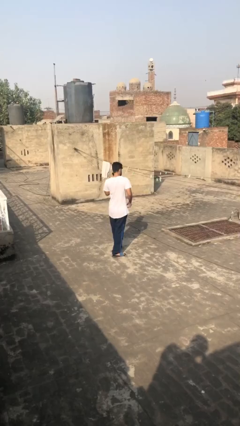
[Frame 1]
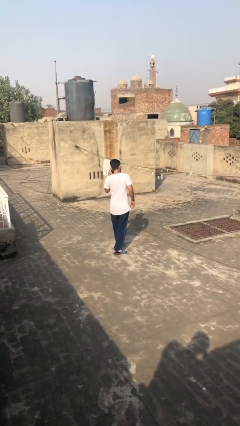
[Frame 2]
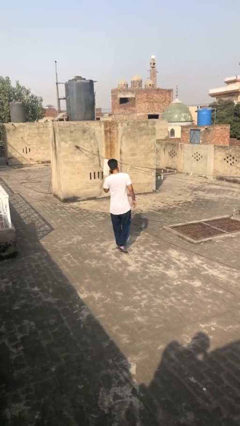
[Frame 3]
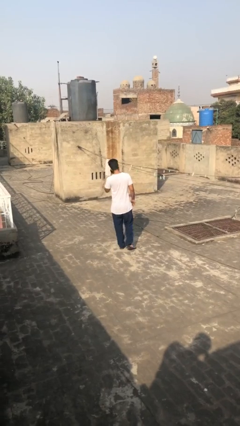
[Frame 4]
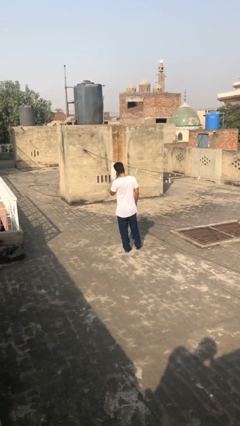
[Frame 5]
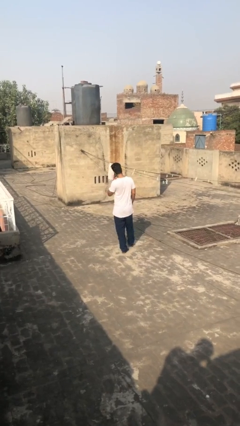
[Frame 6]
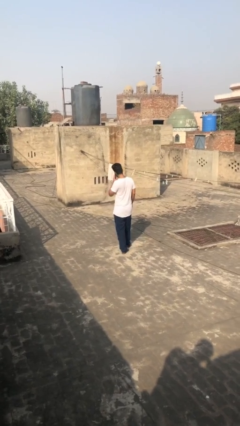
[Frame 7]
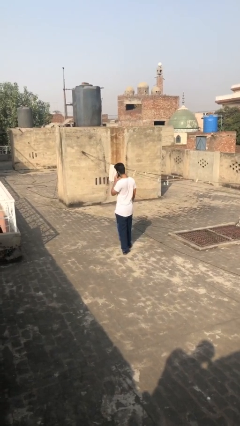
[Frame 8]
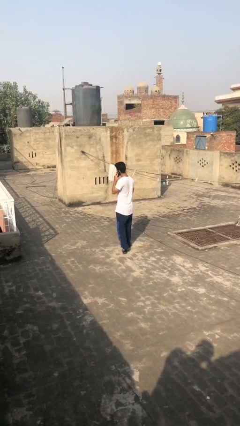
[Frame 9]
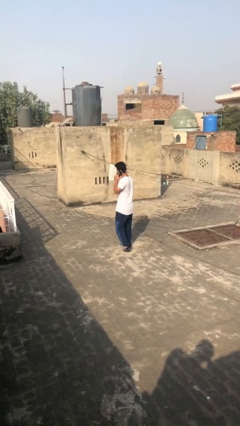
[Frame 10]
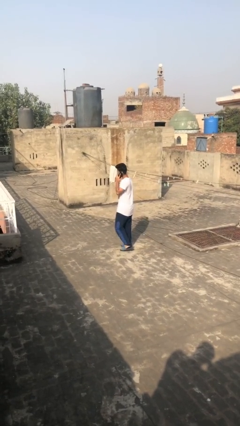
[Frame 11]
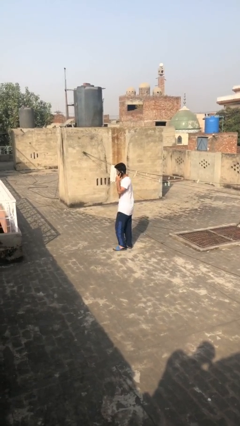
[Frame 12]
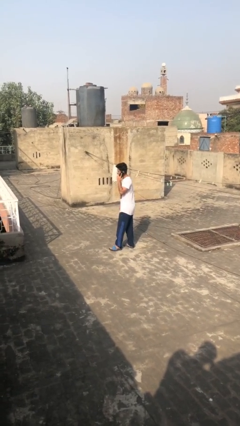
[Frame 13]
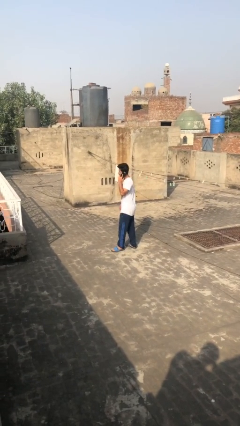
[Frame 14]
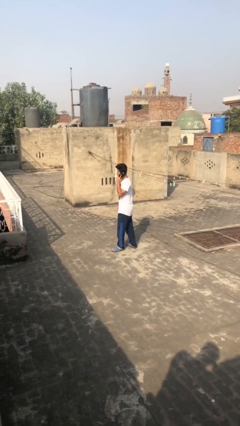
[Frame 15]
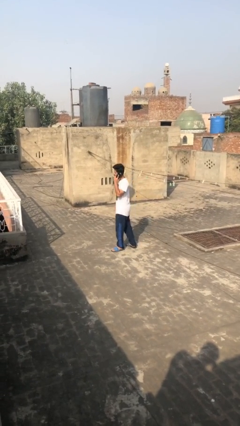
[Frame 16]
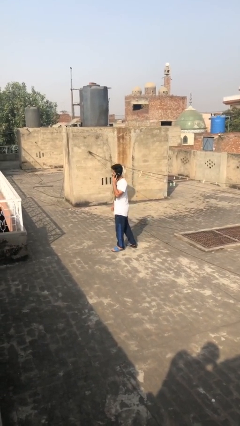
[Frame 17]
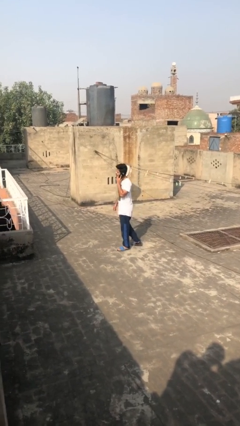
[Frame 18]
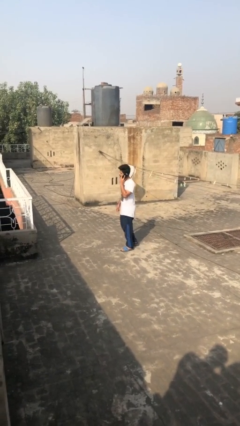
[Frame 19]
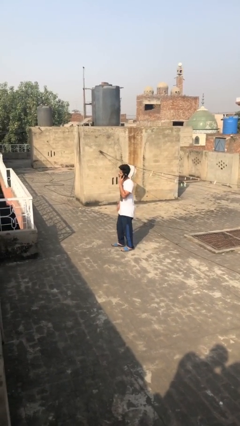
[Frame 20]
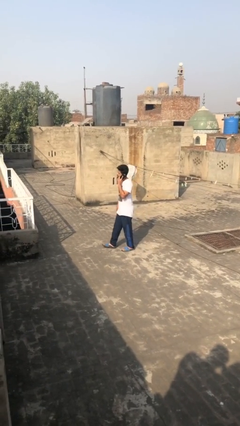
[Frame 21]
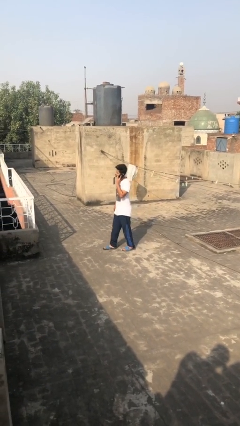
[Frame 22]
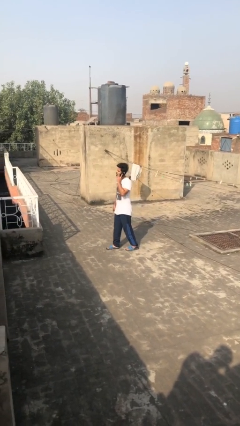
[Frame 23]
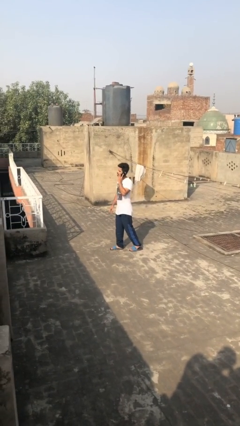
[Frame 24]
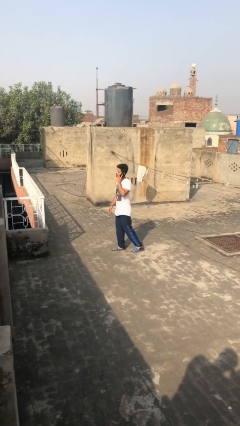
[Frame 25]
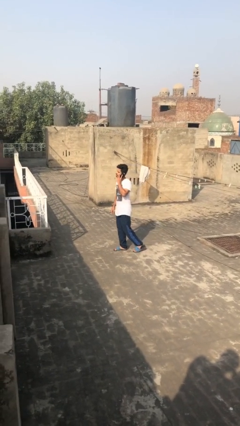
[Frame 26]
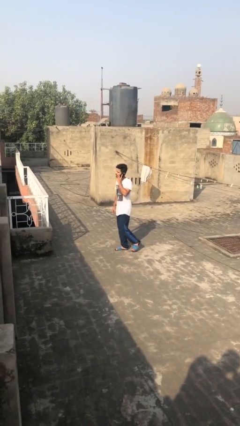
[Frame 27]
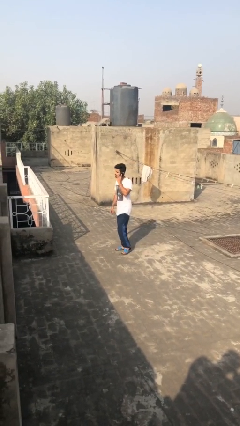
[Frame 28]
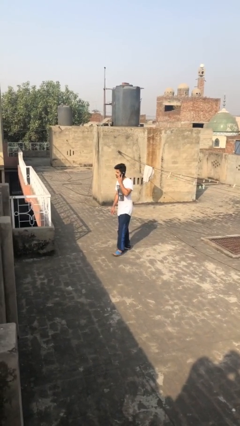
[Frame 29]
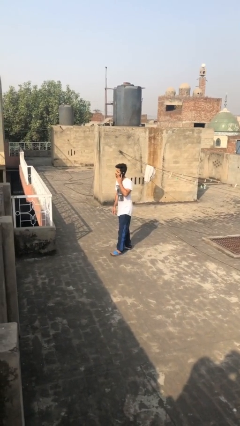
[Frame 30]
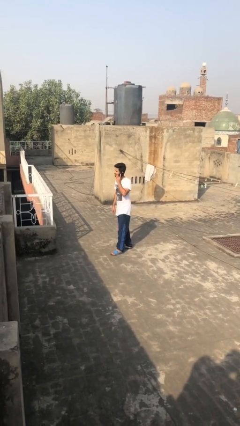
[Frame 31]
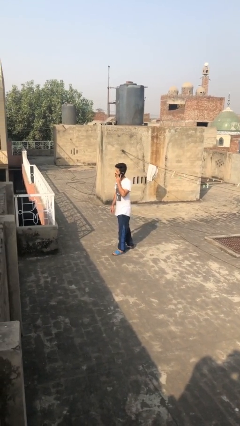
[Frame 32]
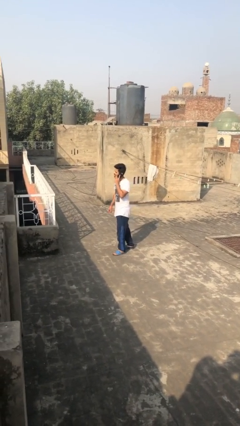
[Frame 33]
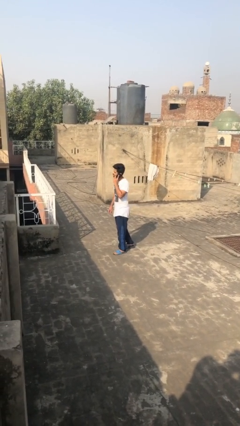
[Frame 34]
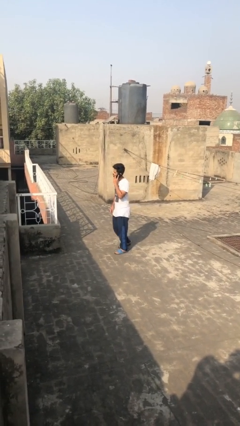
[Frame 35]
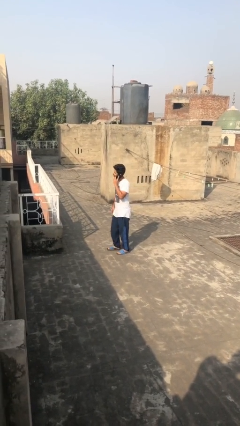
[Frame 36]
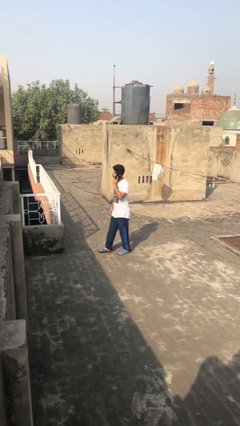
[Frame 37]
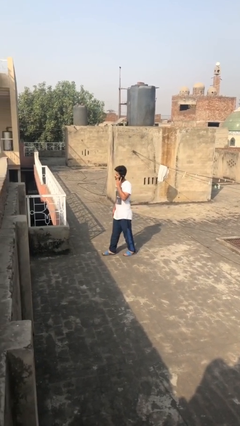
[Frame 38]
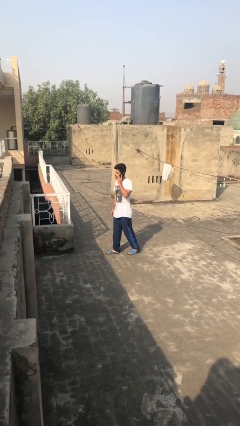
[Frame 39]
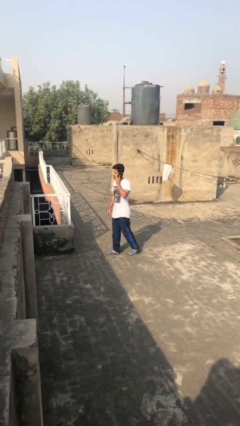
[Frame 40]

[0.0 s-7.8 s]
person talks on phone

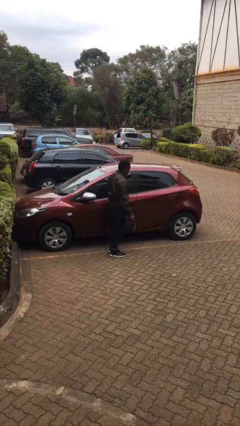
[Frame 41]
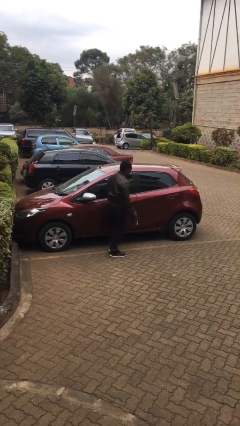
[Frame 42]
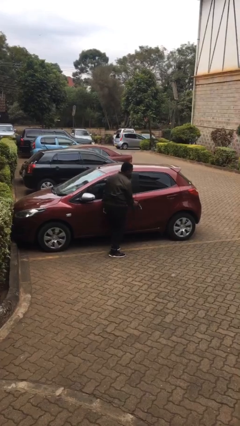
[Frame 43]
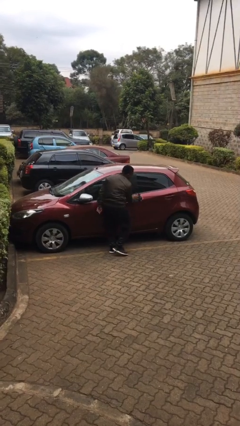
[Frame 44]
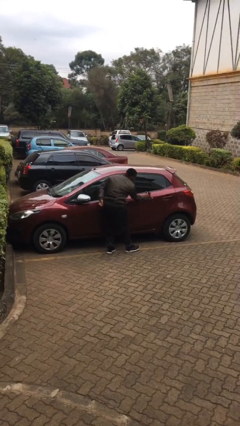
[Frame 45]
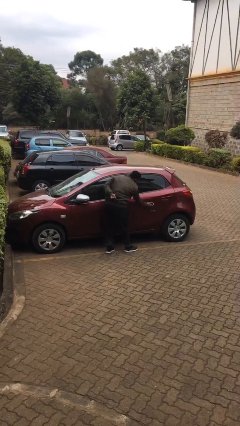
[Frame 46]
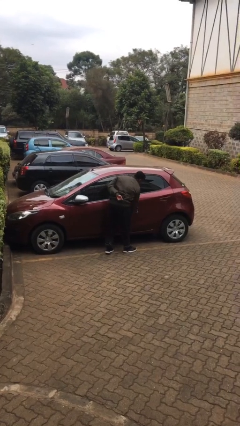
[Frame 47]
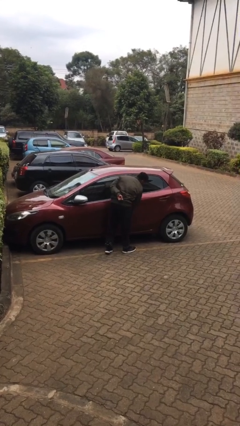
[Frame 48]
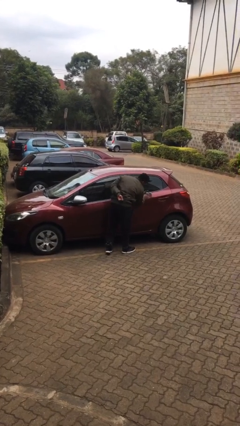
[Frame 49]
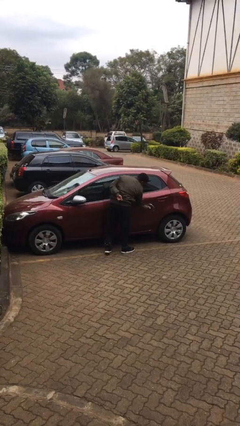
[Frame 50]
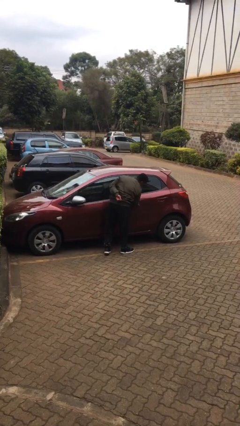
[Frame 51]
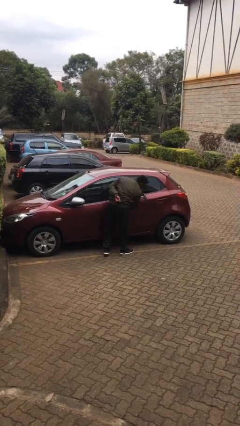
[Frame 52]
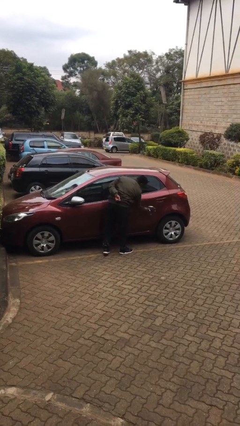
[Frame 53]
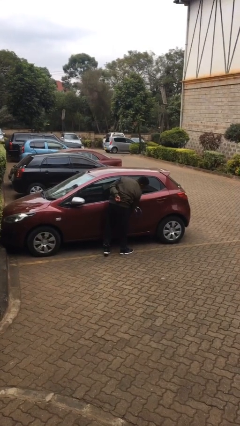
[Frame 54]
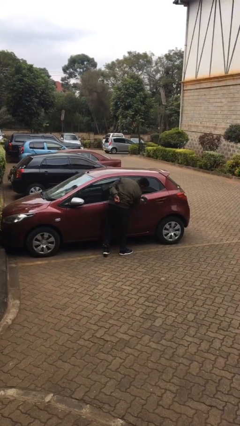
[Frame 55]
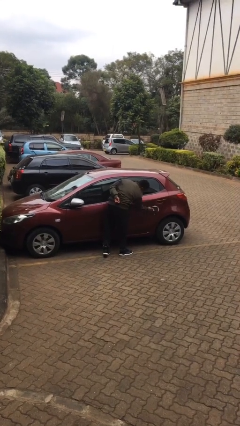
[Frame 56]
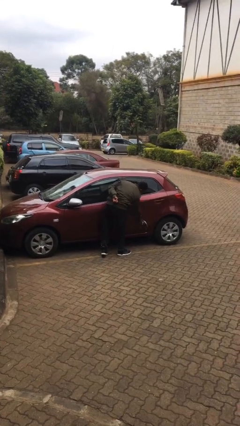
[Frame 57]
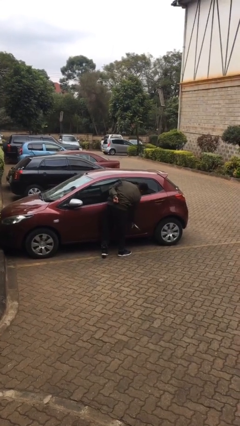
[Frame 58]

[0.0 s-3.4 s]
person polishes car with rag

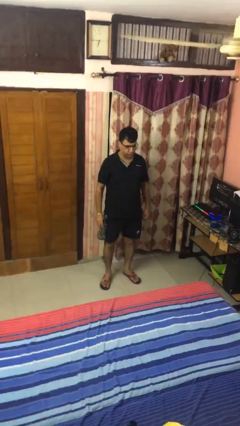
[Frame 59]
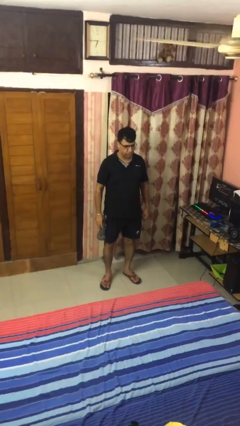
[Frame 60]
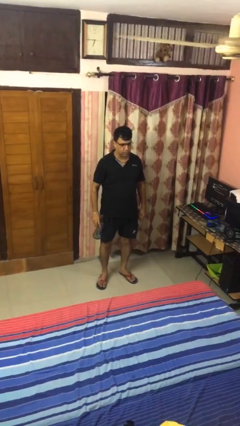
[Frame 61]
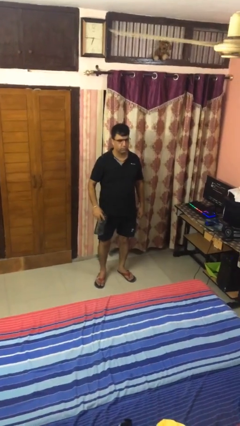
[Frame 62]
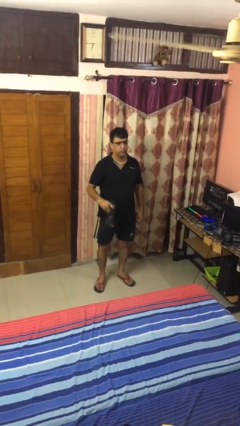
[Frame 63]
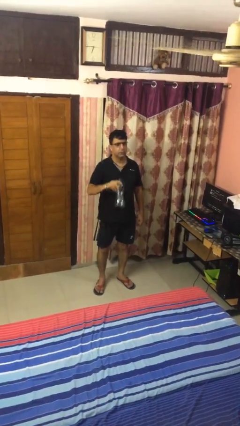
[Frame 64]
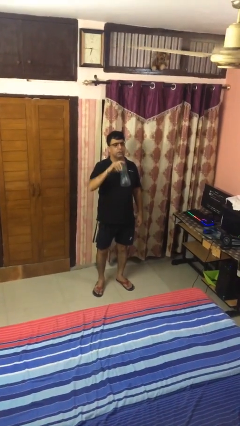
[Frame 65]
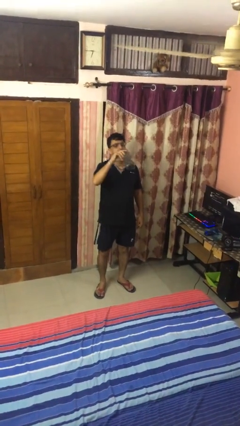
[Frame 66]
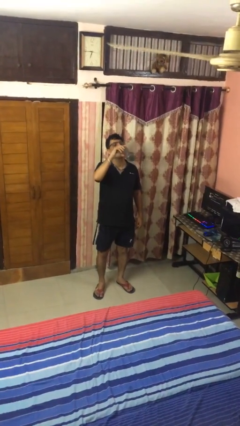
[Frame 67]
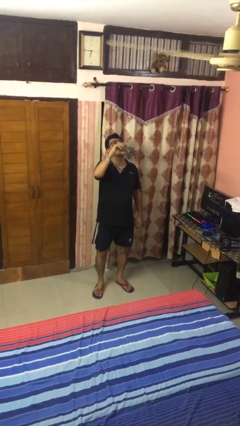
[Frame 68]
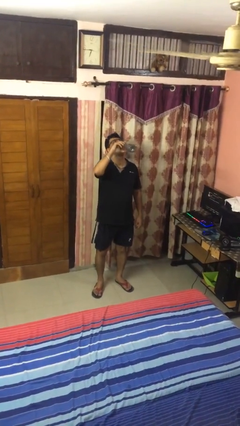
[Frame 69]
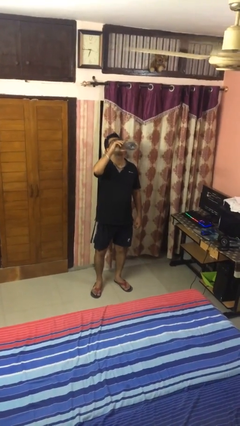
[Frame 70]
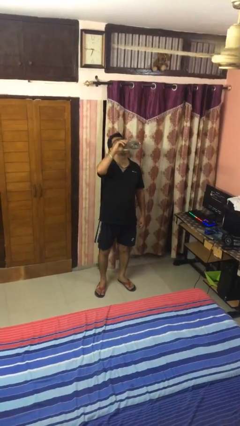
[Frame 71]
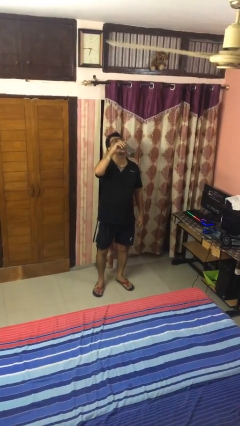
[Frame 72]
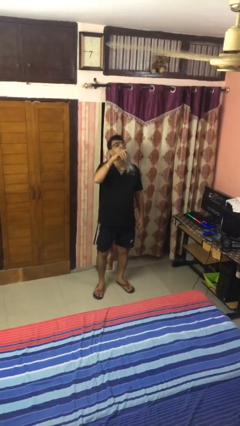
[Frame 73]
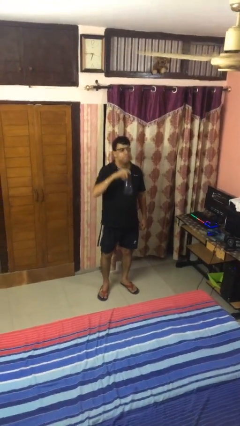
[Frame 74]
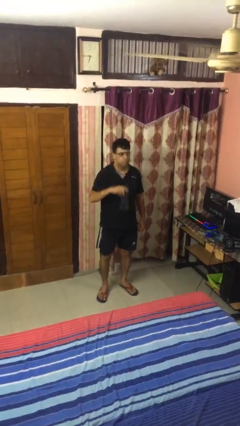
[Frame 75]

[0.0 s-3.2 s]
person drinks from bottle

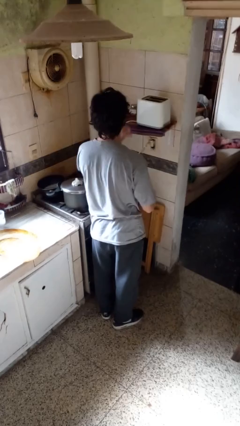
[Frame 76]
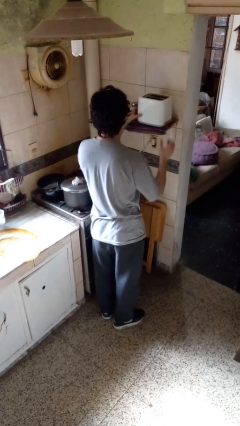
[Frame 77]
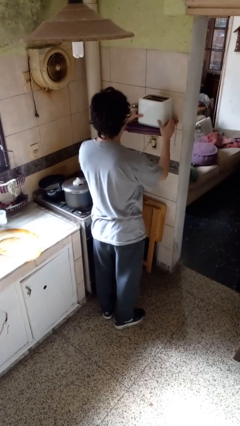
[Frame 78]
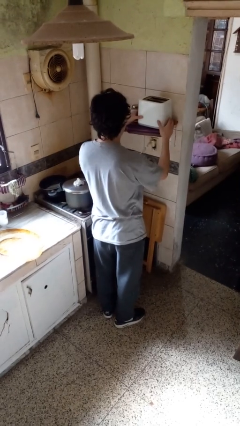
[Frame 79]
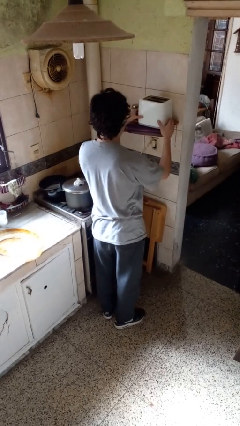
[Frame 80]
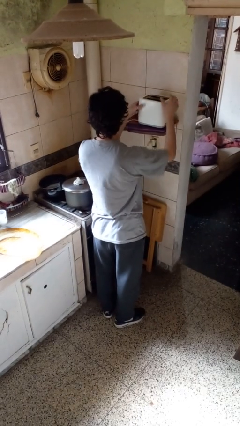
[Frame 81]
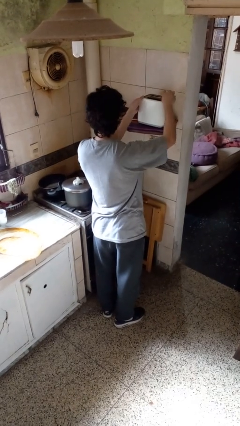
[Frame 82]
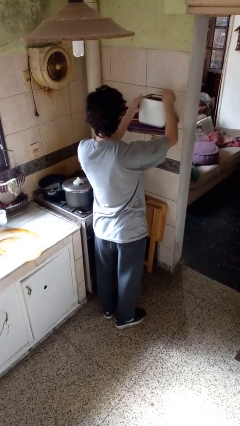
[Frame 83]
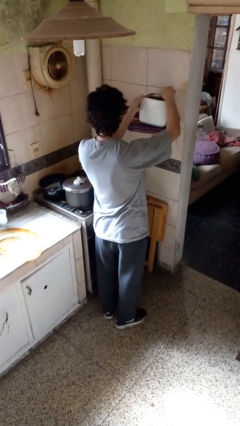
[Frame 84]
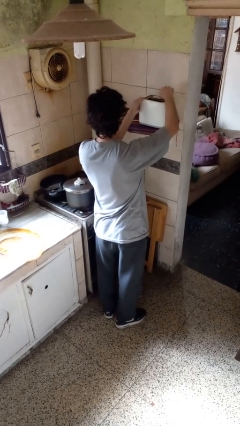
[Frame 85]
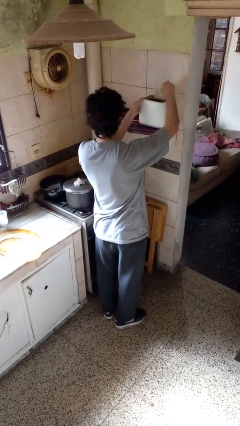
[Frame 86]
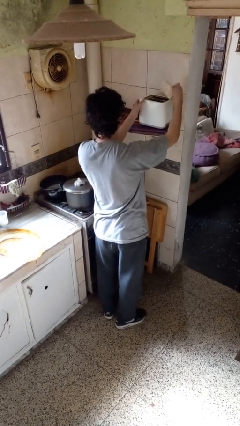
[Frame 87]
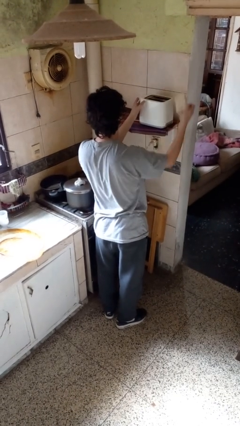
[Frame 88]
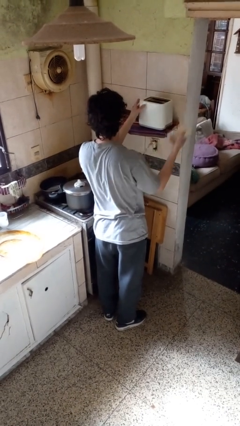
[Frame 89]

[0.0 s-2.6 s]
person takes object from toaster

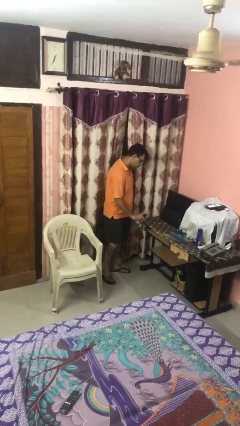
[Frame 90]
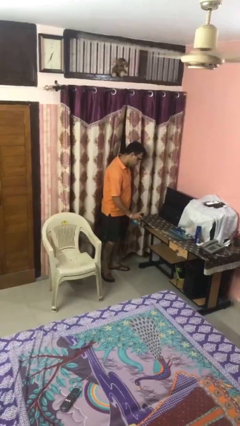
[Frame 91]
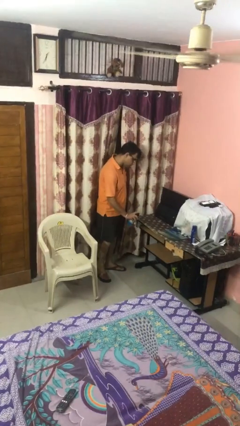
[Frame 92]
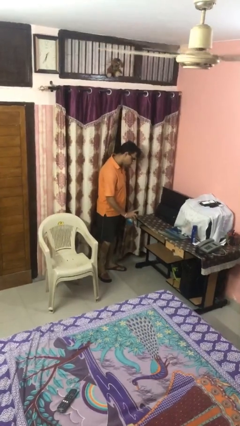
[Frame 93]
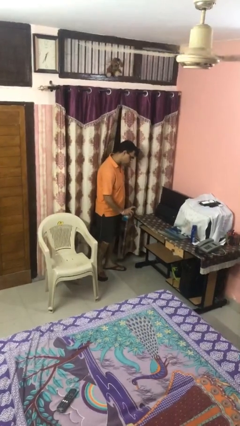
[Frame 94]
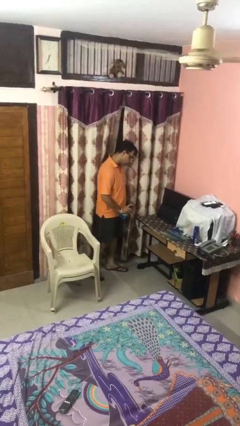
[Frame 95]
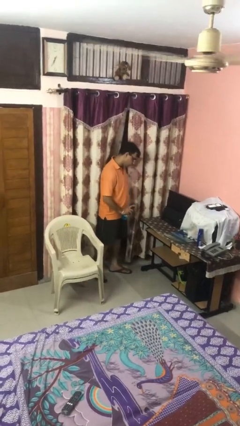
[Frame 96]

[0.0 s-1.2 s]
person sprays from bottle
